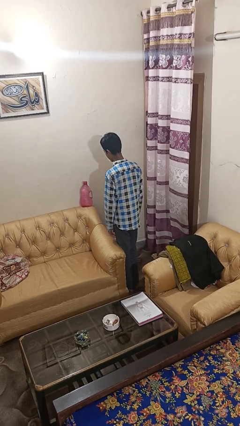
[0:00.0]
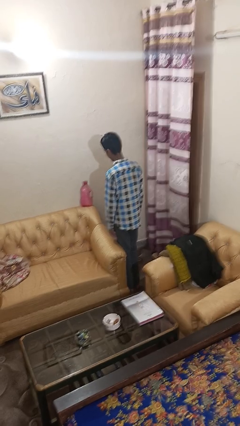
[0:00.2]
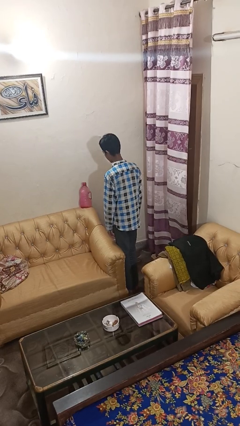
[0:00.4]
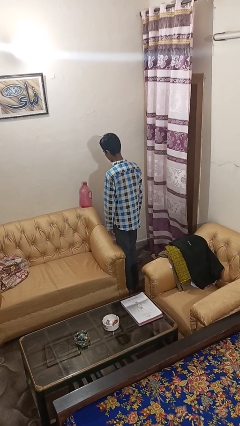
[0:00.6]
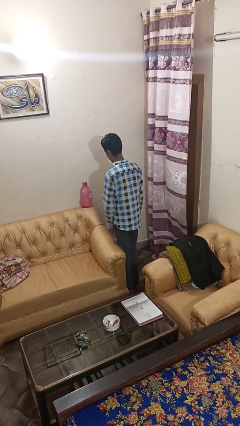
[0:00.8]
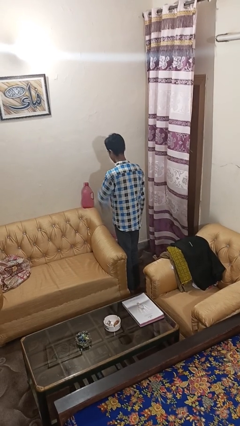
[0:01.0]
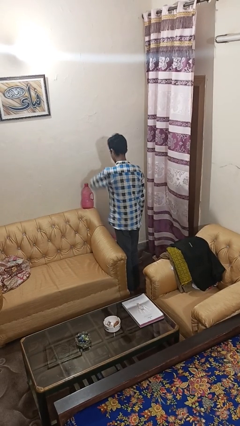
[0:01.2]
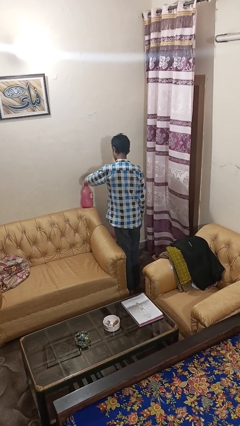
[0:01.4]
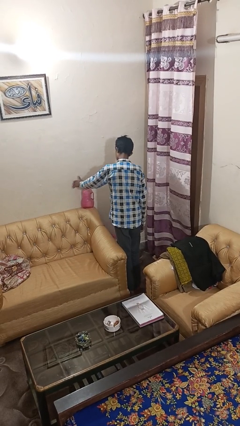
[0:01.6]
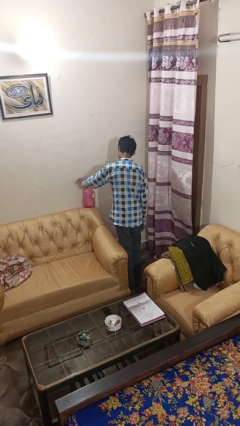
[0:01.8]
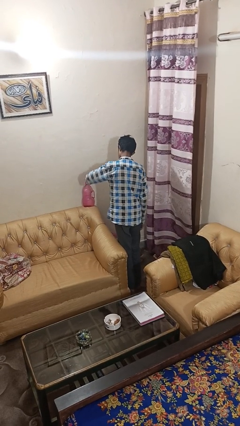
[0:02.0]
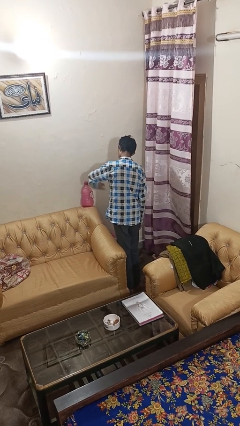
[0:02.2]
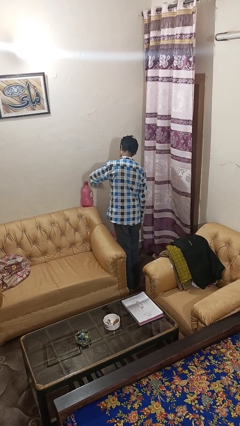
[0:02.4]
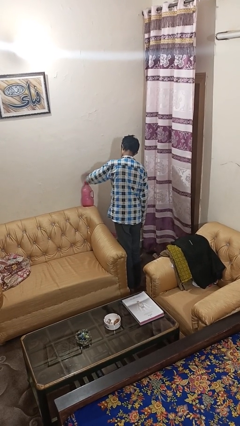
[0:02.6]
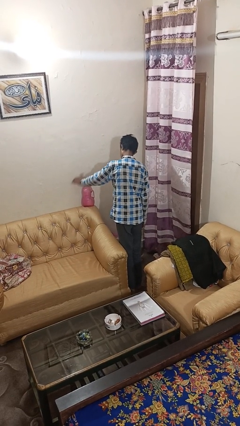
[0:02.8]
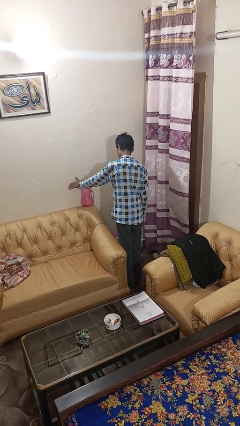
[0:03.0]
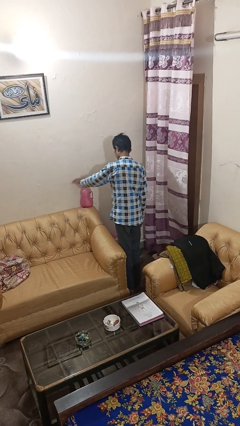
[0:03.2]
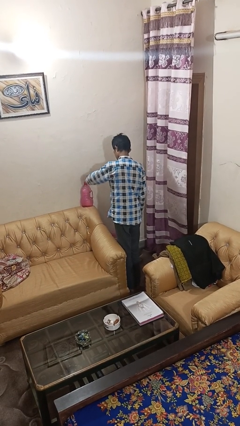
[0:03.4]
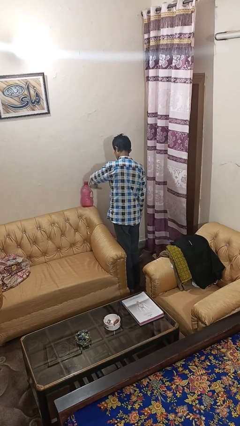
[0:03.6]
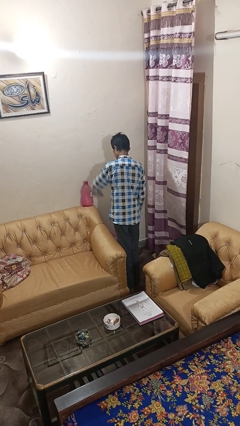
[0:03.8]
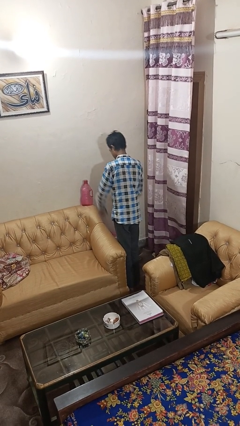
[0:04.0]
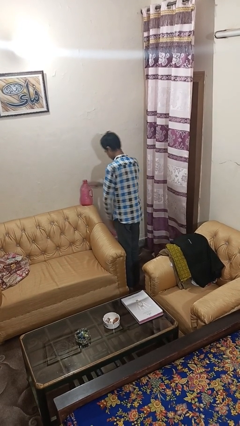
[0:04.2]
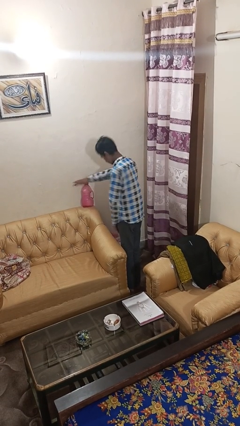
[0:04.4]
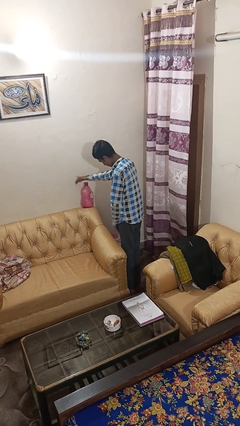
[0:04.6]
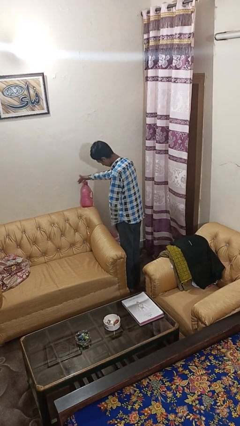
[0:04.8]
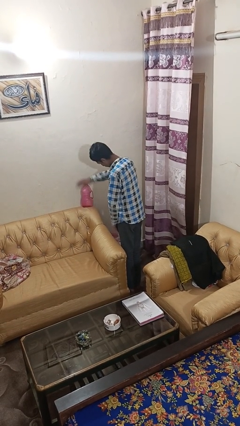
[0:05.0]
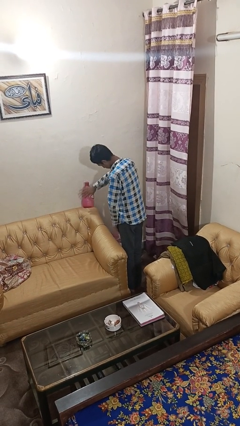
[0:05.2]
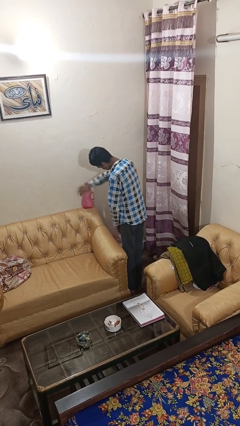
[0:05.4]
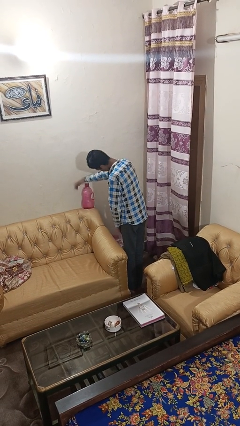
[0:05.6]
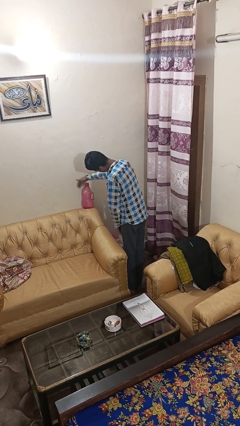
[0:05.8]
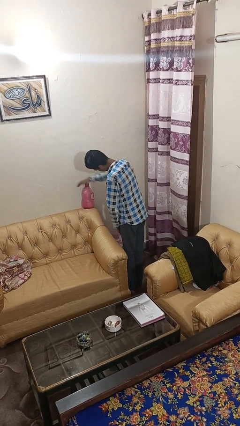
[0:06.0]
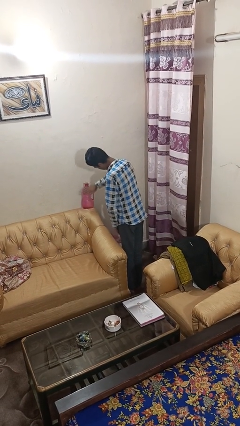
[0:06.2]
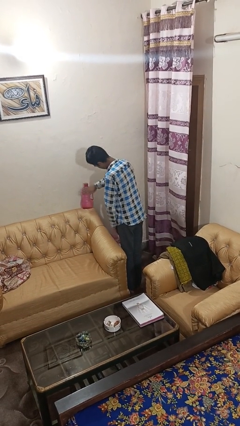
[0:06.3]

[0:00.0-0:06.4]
person waves hand over object

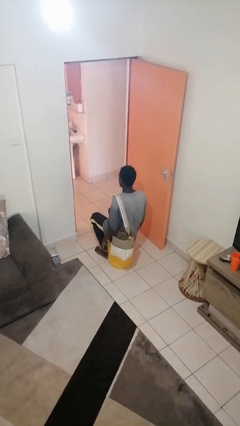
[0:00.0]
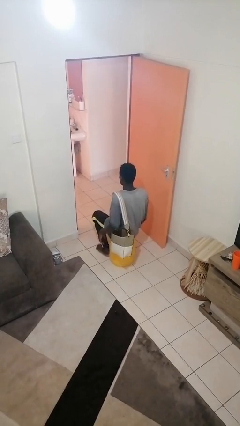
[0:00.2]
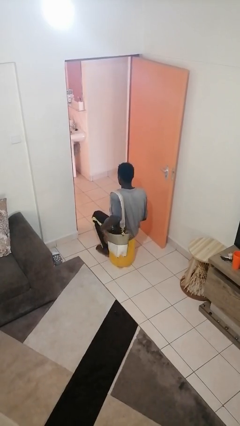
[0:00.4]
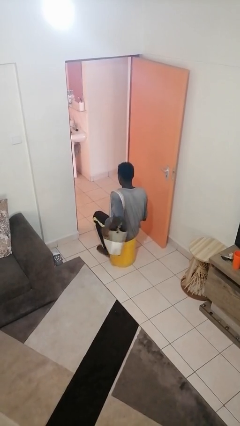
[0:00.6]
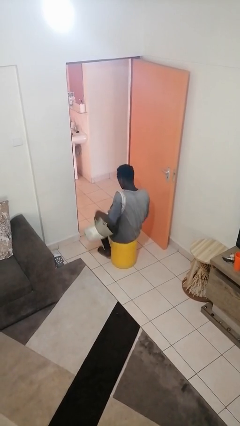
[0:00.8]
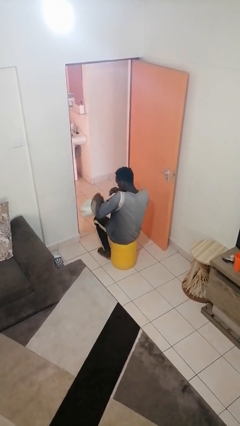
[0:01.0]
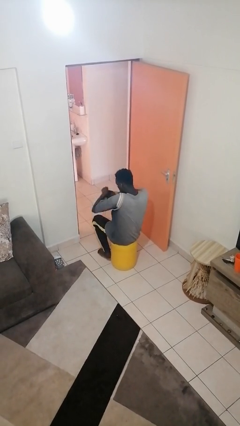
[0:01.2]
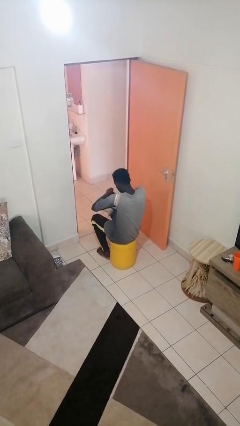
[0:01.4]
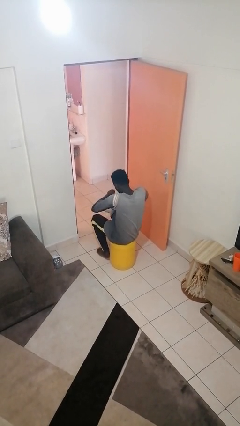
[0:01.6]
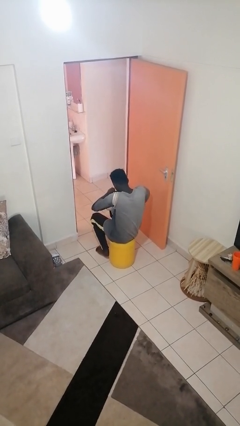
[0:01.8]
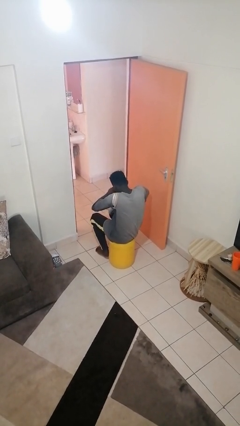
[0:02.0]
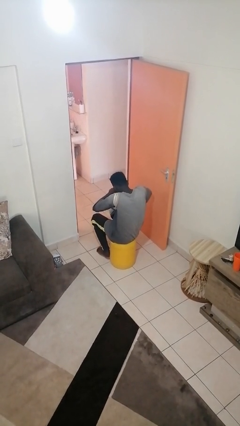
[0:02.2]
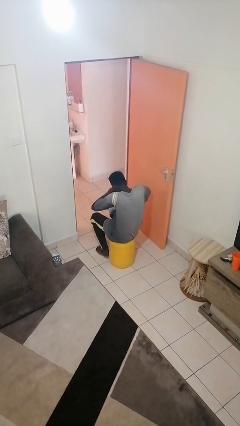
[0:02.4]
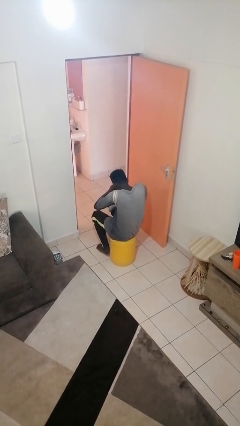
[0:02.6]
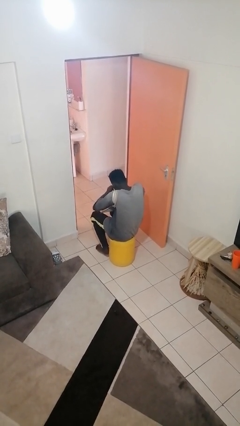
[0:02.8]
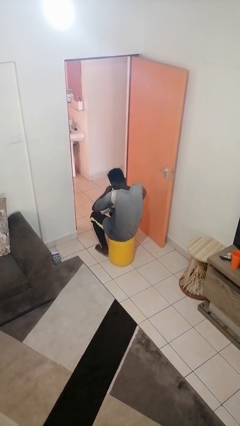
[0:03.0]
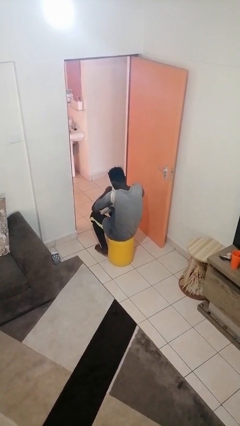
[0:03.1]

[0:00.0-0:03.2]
person searches in purse

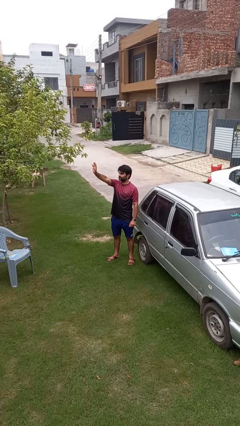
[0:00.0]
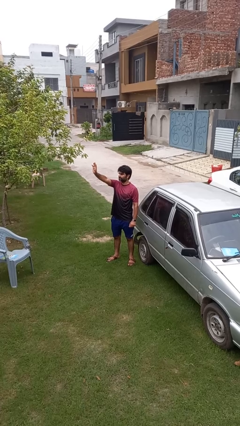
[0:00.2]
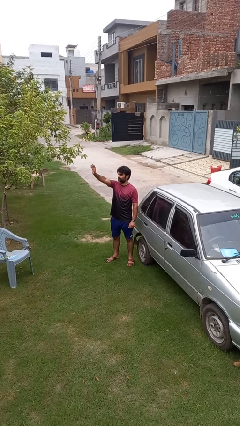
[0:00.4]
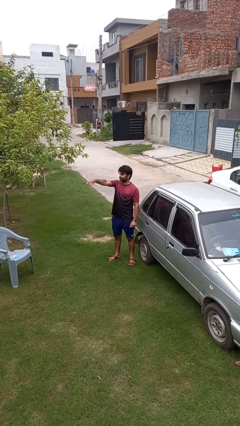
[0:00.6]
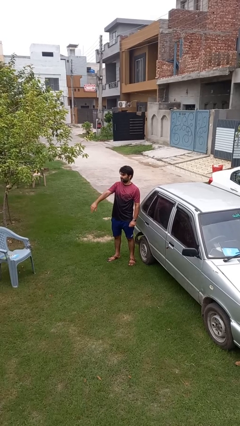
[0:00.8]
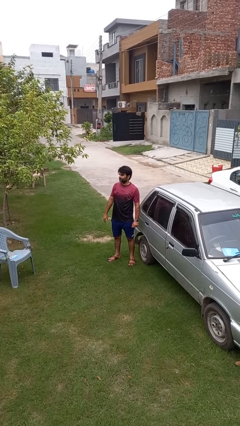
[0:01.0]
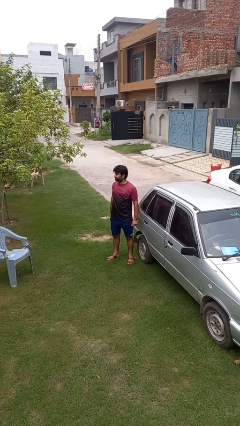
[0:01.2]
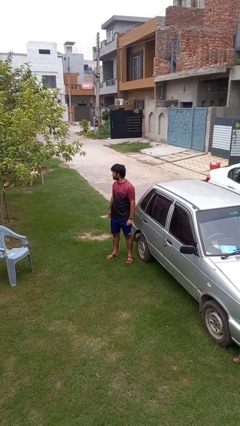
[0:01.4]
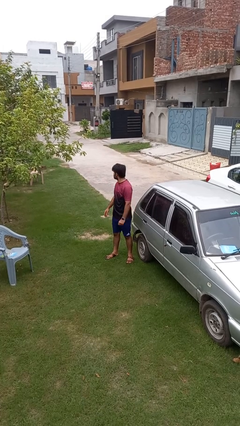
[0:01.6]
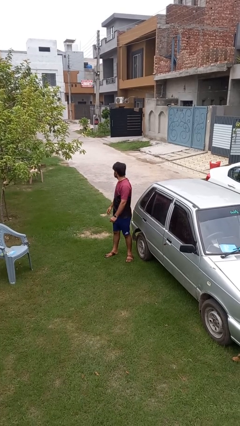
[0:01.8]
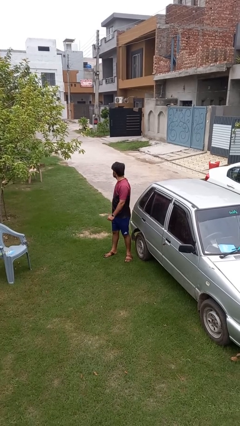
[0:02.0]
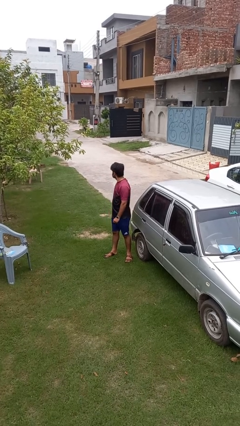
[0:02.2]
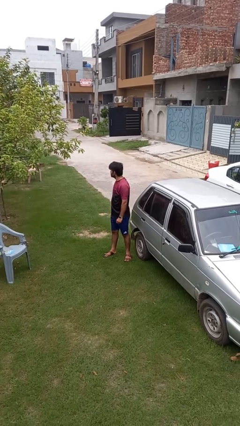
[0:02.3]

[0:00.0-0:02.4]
person gestures lower hand

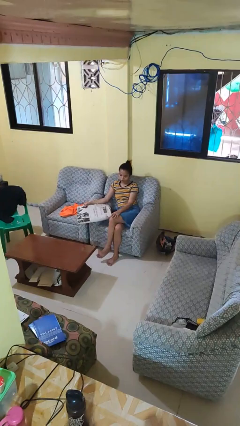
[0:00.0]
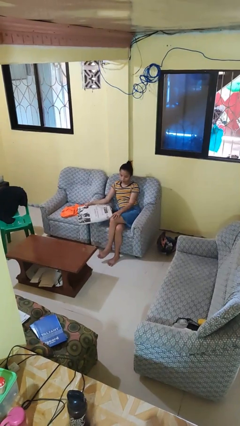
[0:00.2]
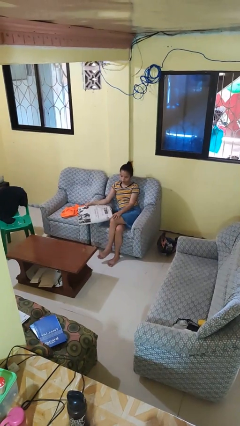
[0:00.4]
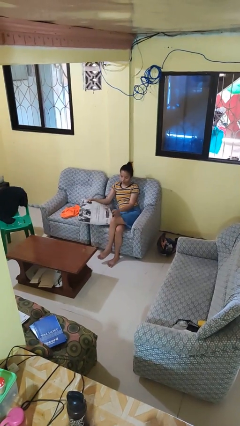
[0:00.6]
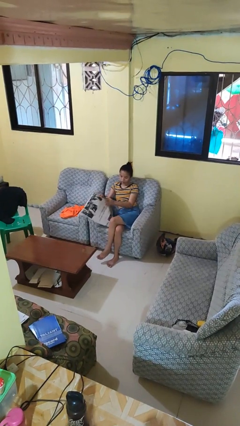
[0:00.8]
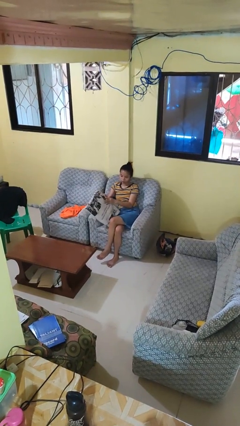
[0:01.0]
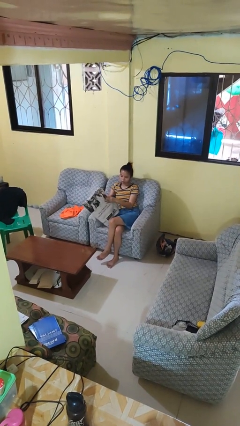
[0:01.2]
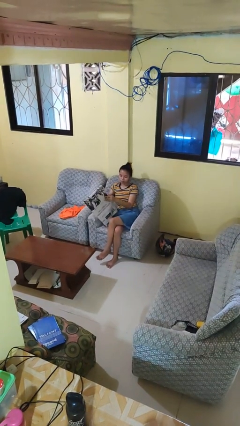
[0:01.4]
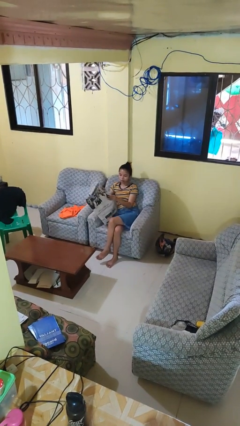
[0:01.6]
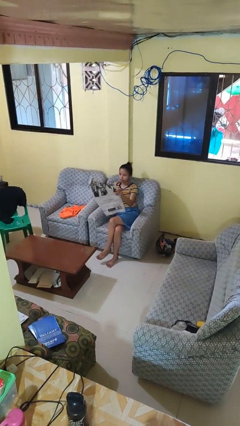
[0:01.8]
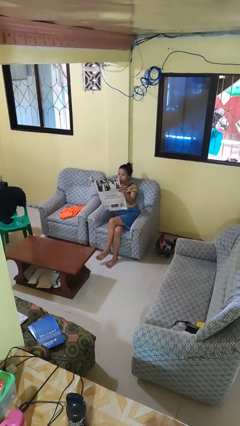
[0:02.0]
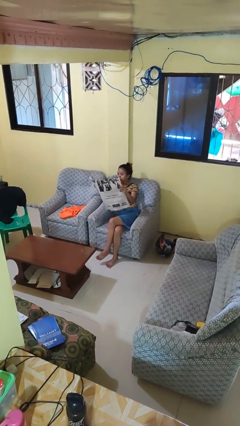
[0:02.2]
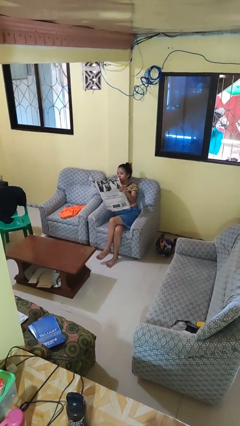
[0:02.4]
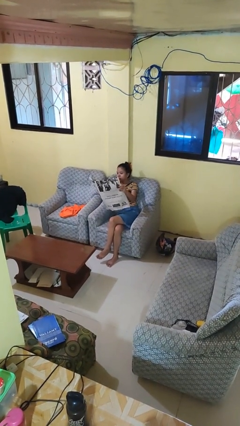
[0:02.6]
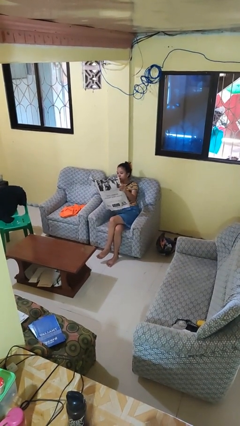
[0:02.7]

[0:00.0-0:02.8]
person reads newspaper

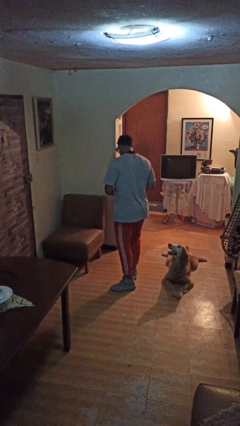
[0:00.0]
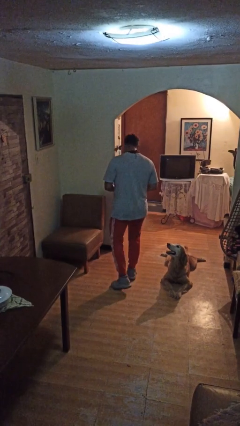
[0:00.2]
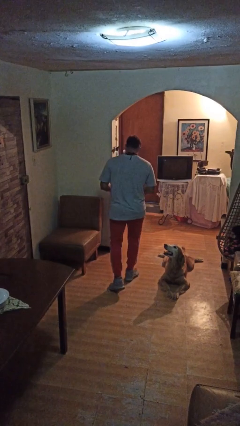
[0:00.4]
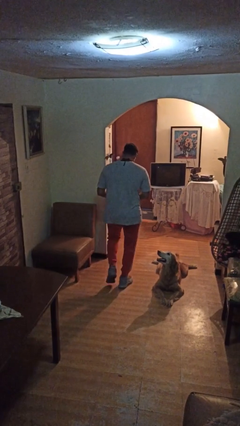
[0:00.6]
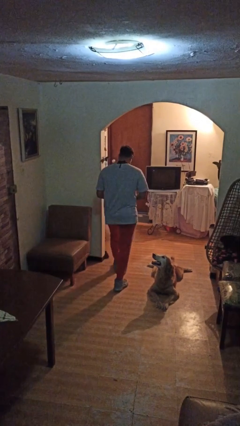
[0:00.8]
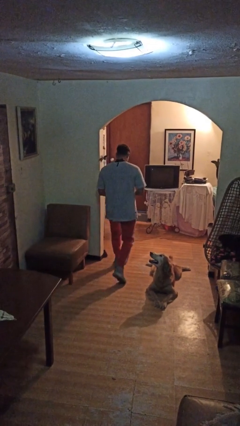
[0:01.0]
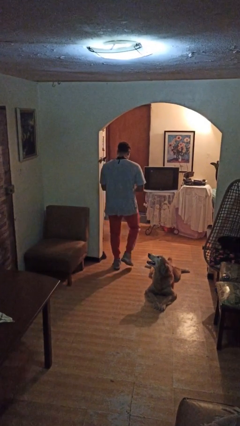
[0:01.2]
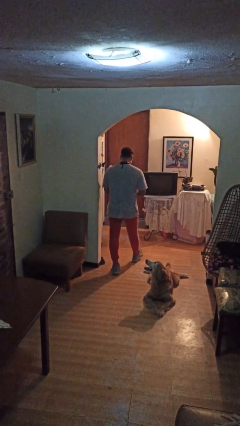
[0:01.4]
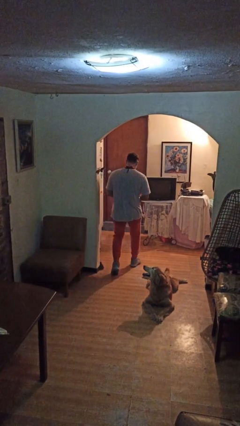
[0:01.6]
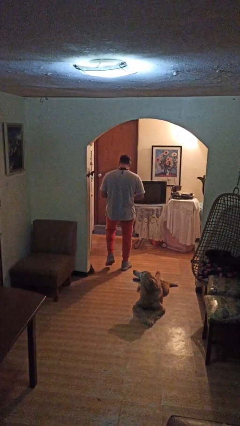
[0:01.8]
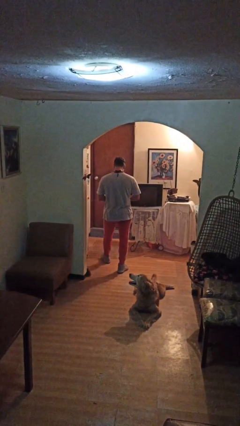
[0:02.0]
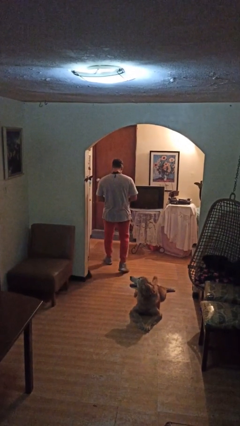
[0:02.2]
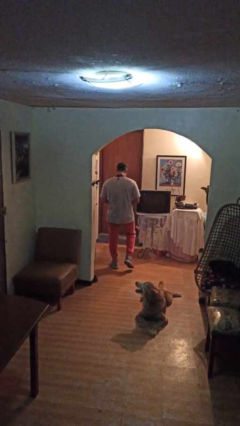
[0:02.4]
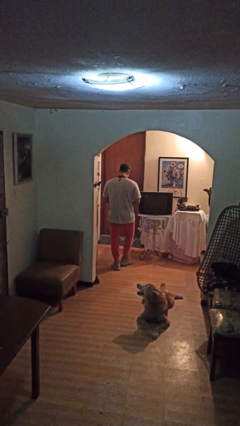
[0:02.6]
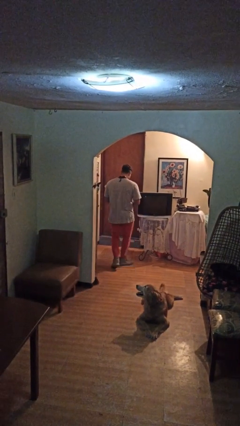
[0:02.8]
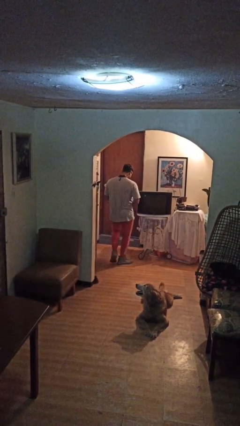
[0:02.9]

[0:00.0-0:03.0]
person exits scene through structure
